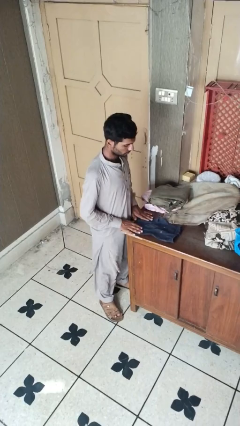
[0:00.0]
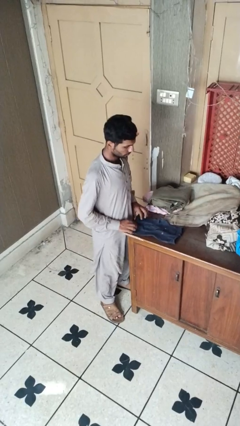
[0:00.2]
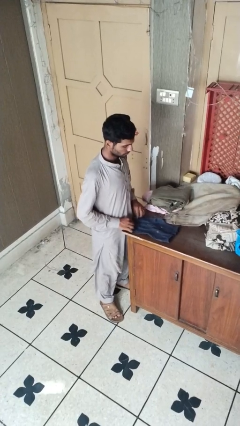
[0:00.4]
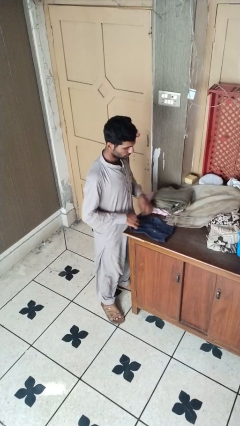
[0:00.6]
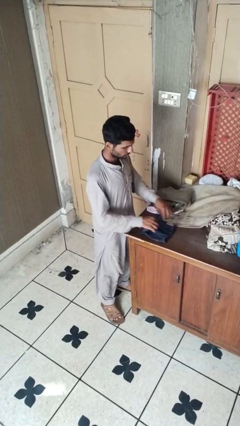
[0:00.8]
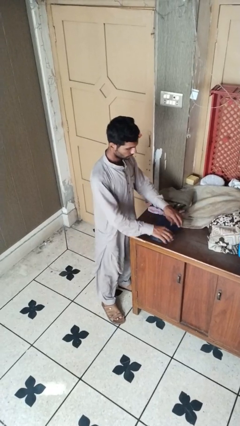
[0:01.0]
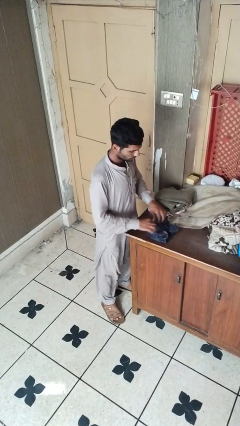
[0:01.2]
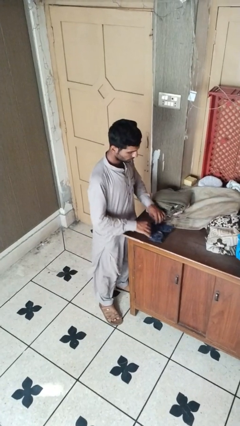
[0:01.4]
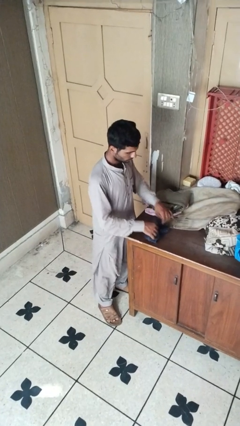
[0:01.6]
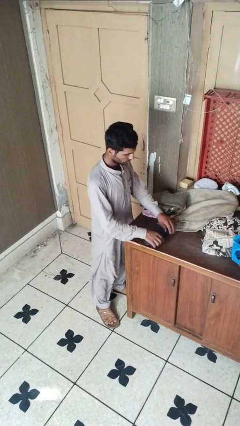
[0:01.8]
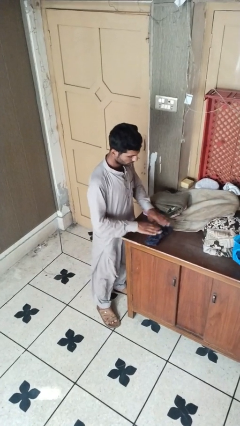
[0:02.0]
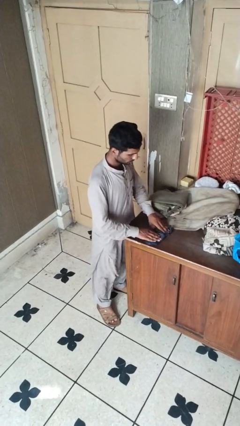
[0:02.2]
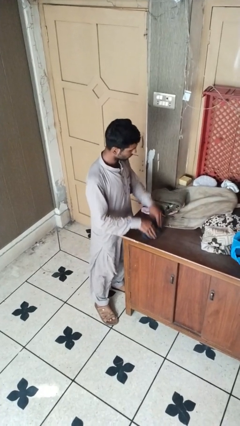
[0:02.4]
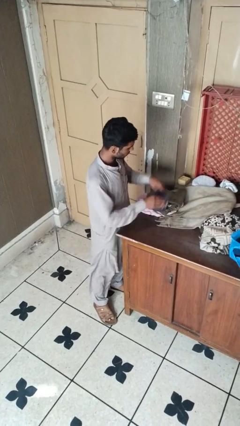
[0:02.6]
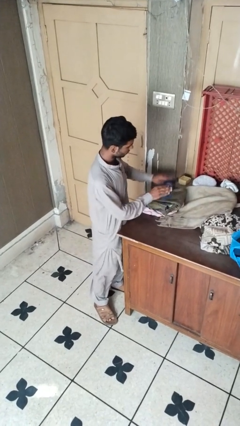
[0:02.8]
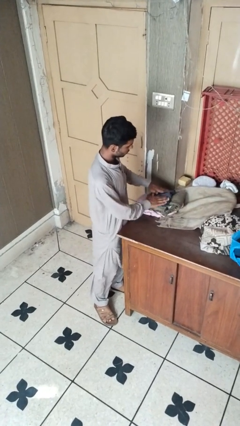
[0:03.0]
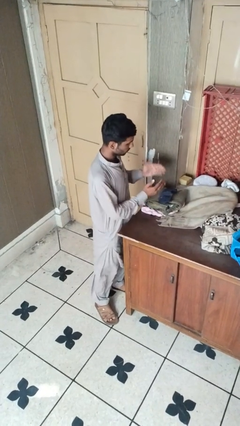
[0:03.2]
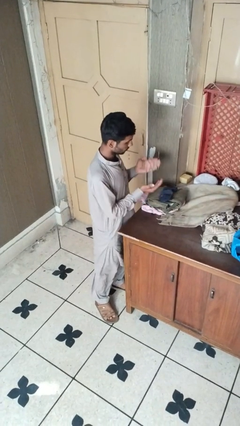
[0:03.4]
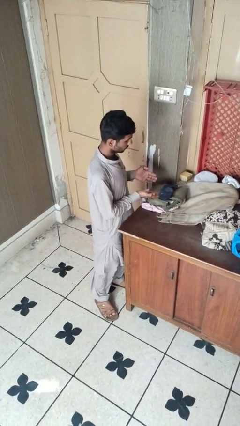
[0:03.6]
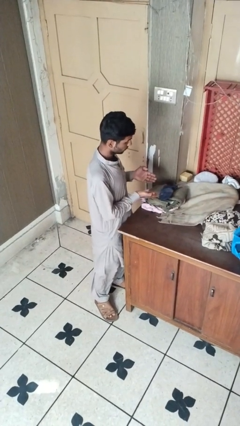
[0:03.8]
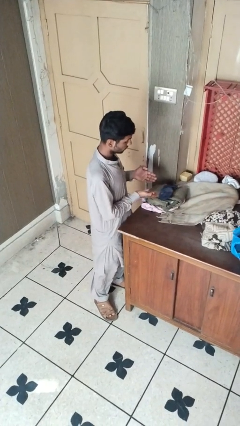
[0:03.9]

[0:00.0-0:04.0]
person folds socks

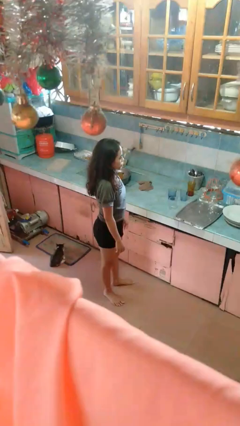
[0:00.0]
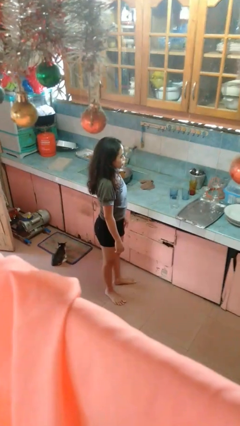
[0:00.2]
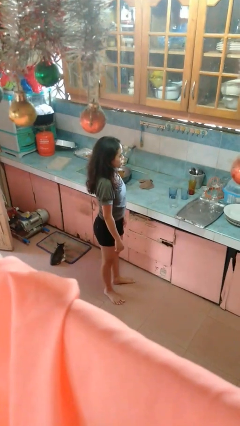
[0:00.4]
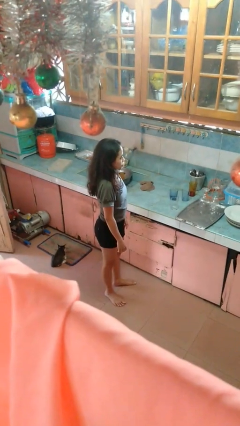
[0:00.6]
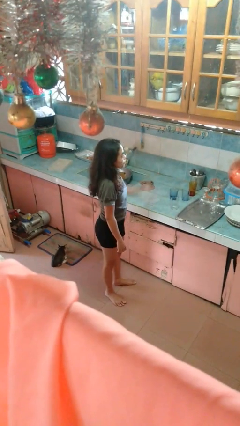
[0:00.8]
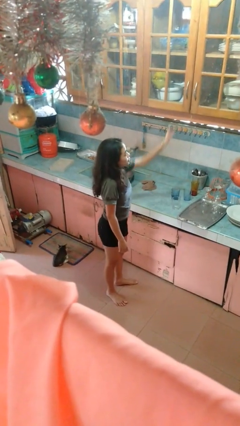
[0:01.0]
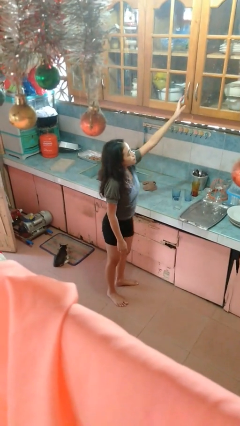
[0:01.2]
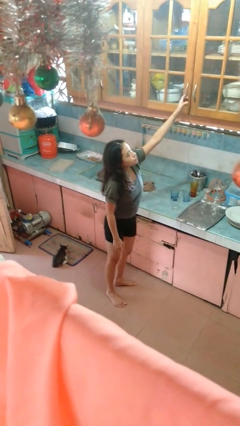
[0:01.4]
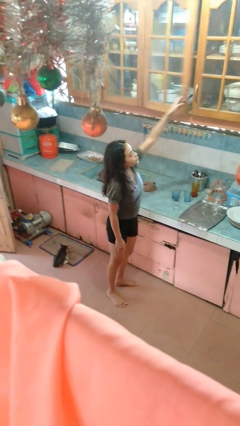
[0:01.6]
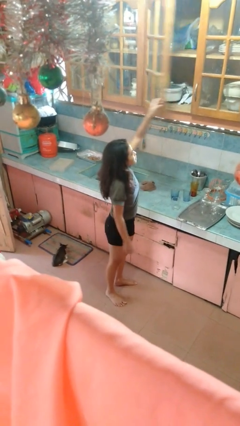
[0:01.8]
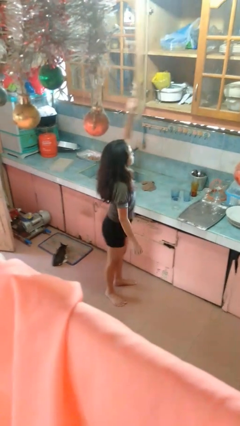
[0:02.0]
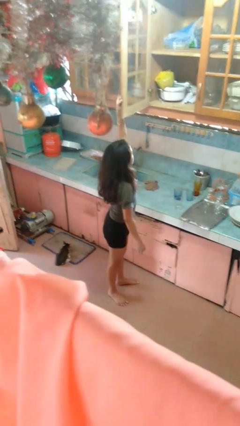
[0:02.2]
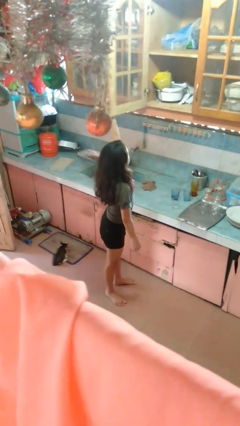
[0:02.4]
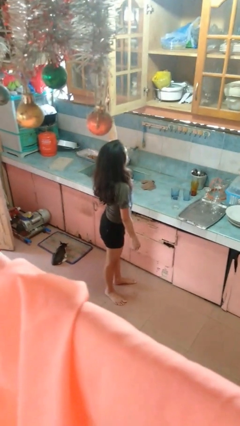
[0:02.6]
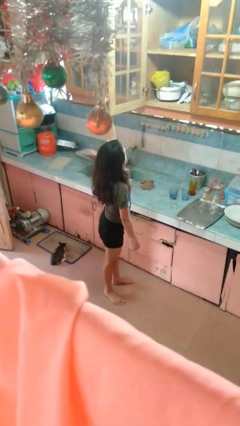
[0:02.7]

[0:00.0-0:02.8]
person opens cabinet

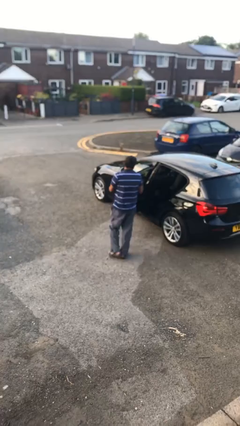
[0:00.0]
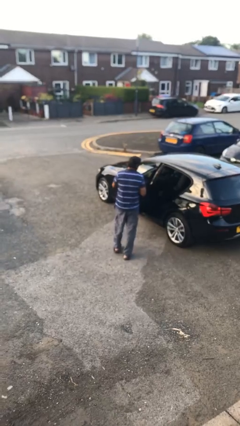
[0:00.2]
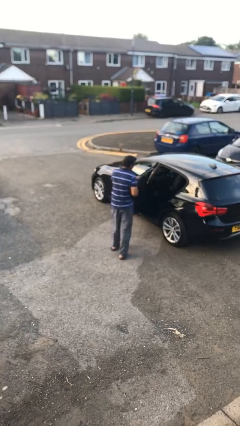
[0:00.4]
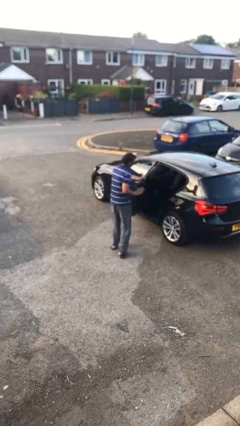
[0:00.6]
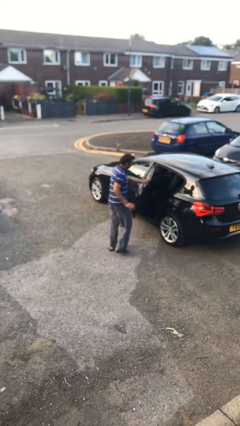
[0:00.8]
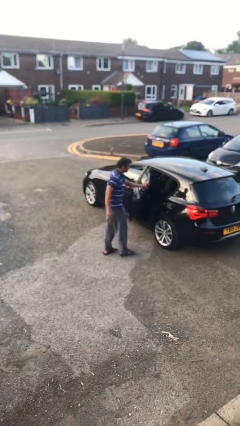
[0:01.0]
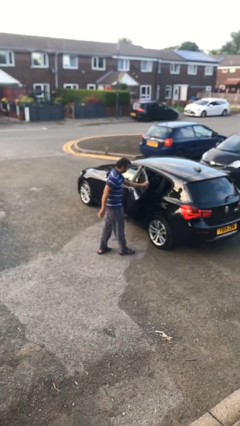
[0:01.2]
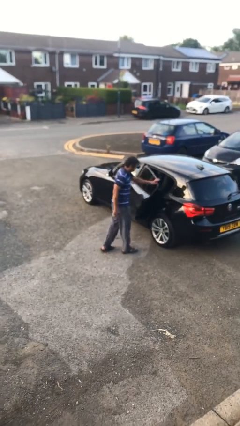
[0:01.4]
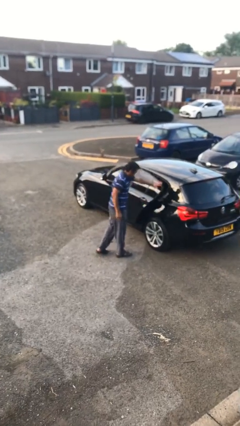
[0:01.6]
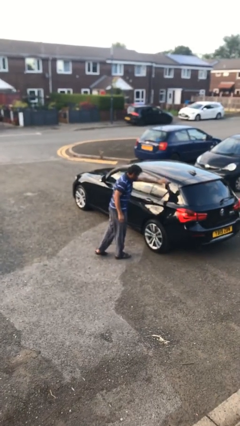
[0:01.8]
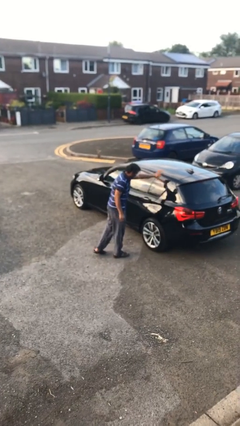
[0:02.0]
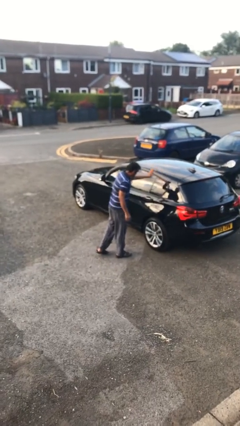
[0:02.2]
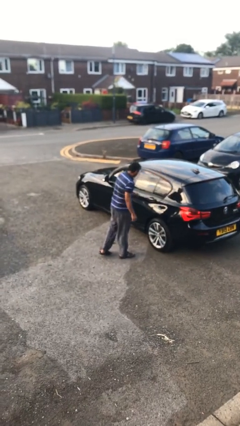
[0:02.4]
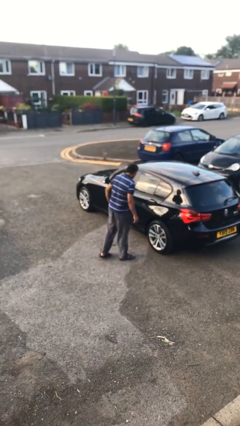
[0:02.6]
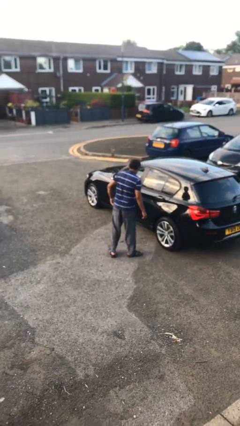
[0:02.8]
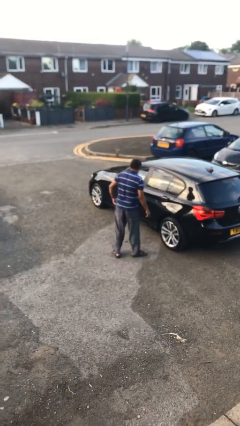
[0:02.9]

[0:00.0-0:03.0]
person closes car door

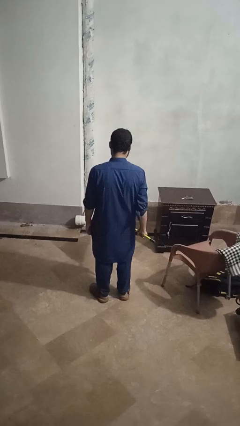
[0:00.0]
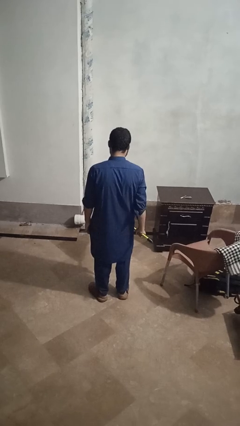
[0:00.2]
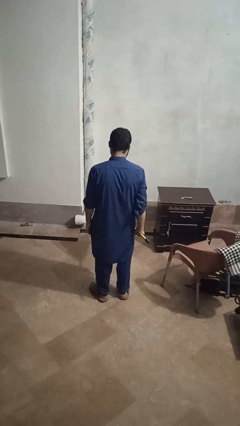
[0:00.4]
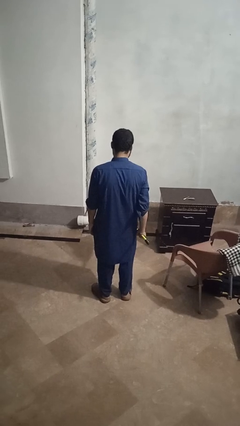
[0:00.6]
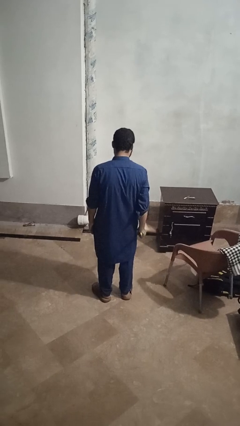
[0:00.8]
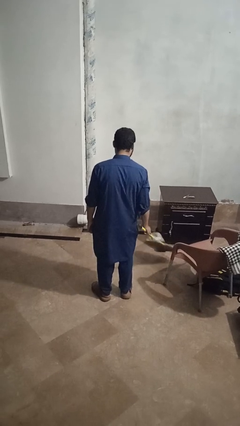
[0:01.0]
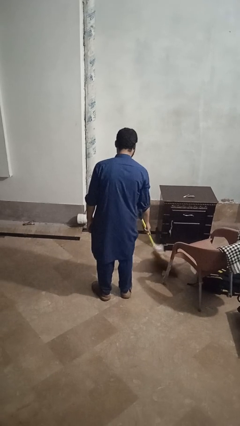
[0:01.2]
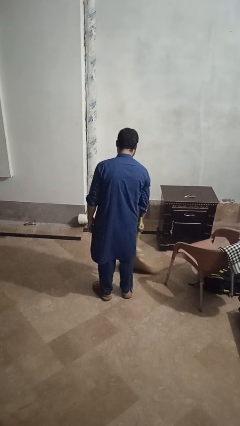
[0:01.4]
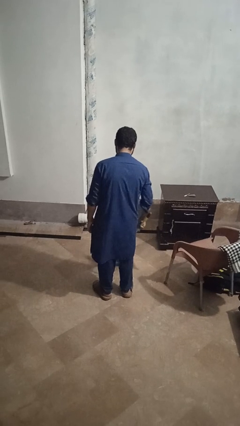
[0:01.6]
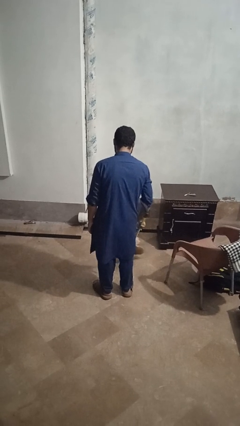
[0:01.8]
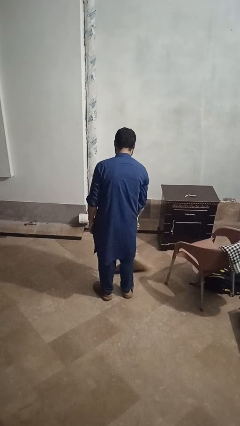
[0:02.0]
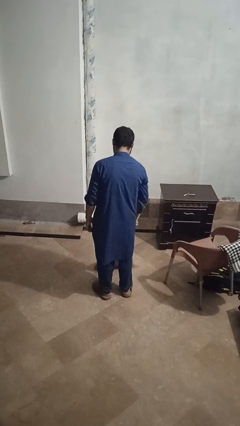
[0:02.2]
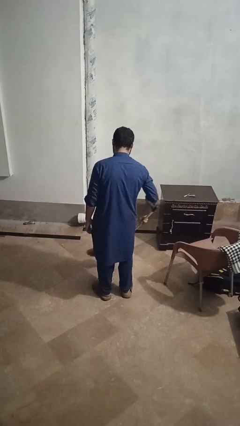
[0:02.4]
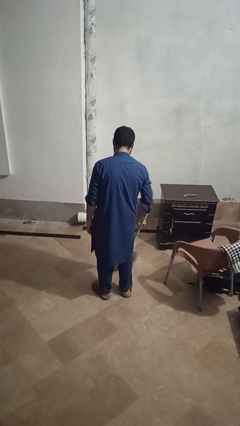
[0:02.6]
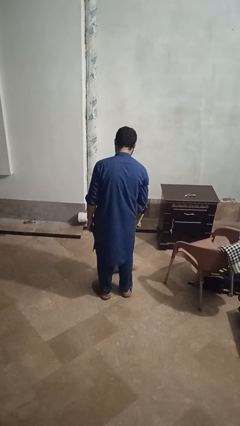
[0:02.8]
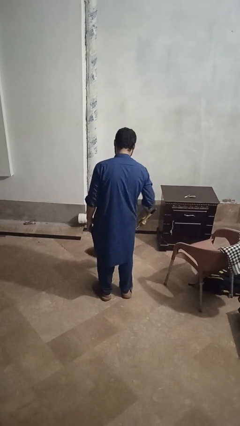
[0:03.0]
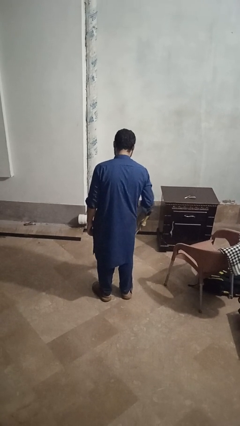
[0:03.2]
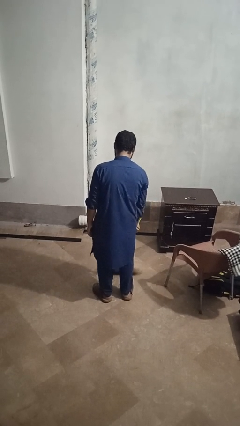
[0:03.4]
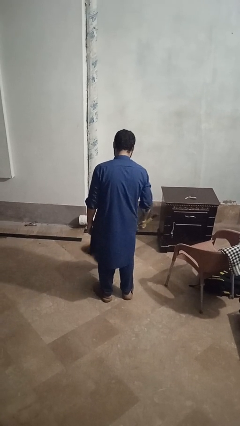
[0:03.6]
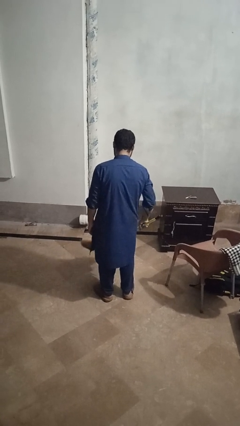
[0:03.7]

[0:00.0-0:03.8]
person mops

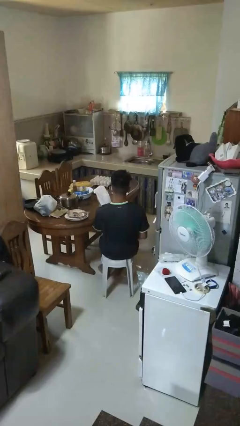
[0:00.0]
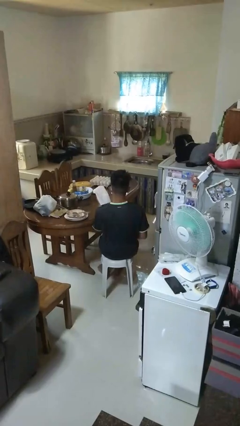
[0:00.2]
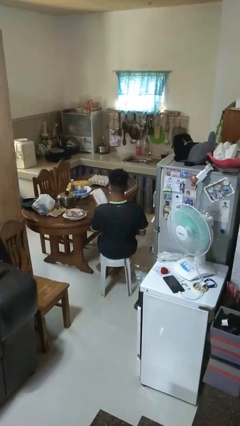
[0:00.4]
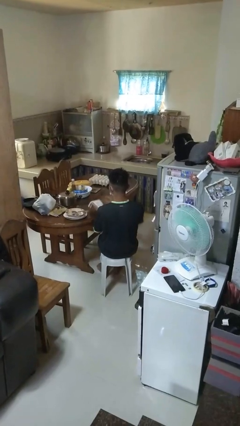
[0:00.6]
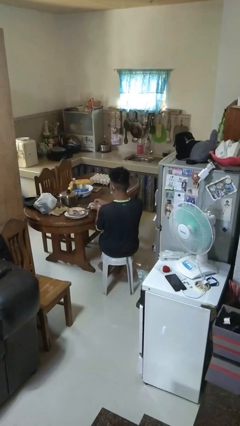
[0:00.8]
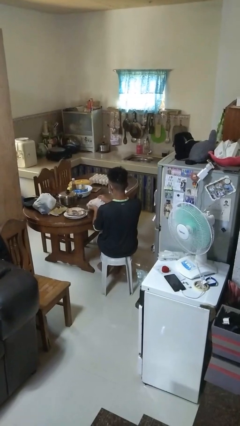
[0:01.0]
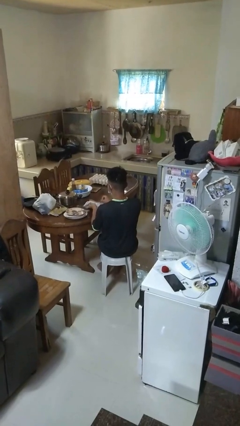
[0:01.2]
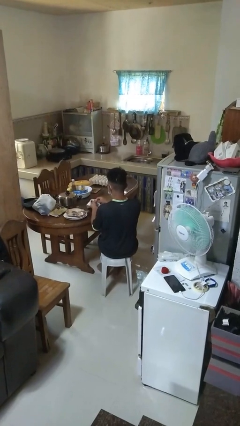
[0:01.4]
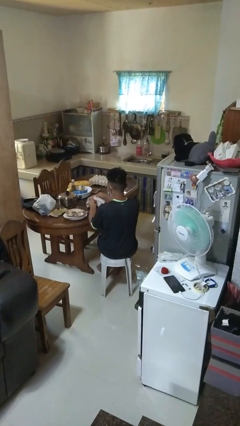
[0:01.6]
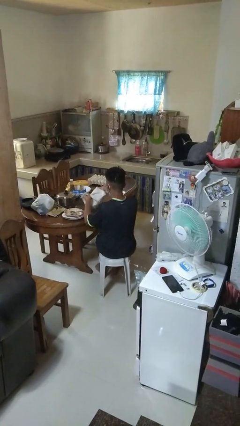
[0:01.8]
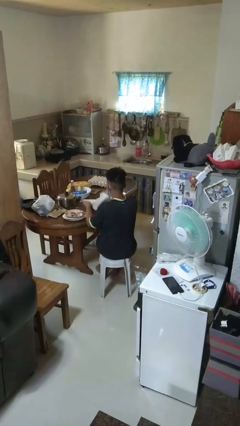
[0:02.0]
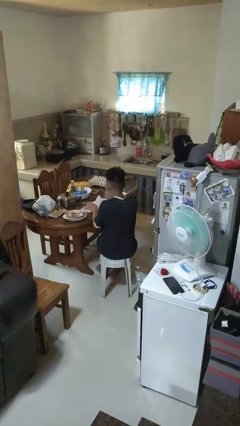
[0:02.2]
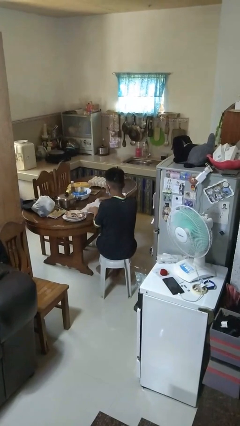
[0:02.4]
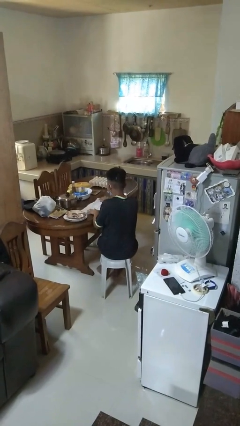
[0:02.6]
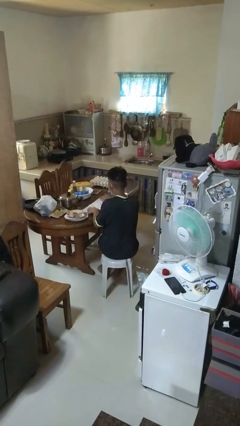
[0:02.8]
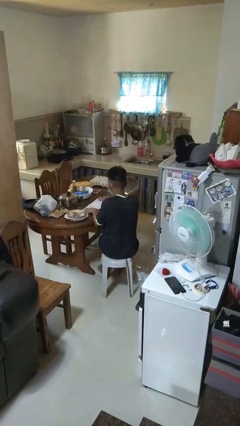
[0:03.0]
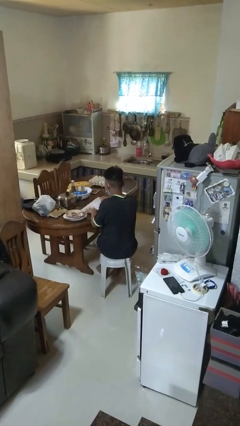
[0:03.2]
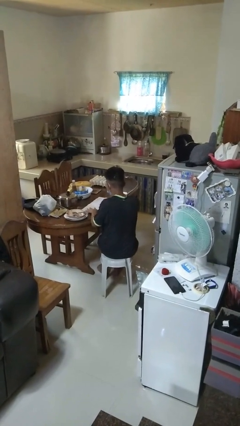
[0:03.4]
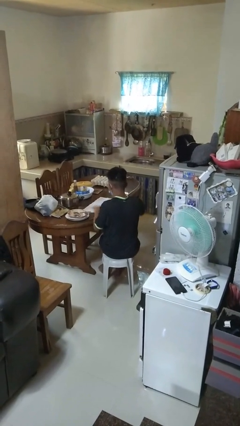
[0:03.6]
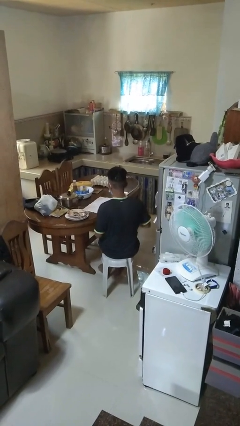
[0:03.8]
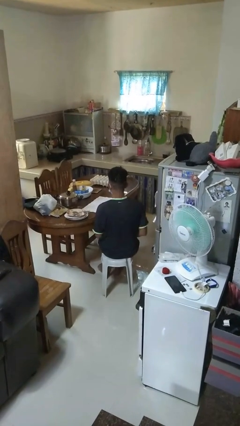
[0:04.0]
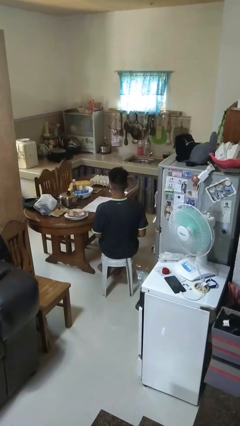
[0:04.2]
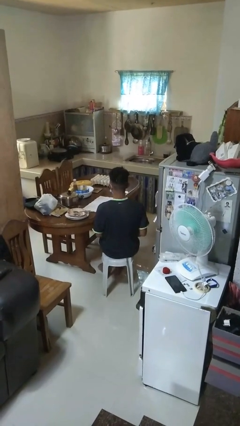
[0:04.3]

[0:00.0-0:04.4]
person spreads tablecloth
